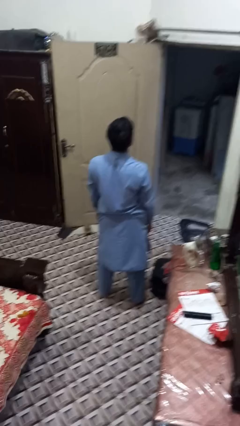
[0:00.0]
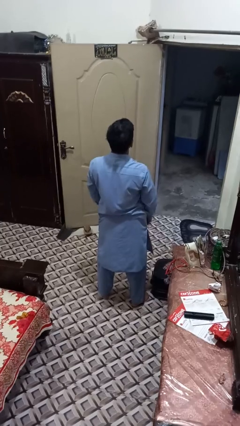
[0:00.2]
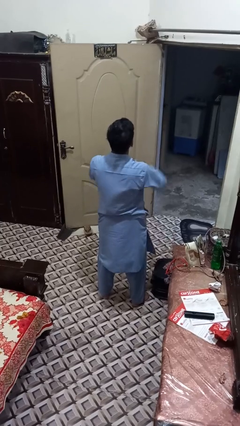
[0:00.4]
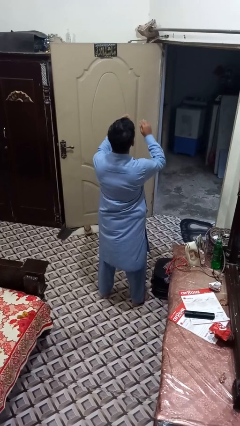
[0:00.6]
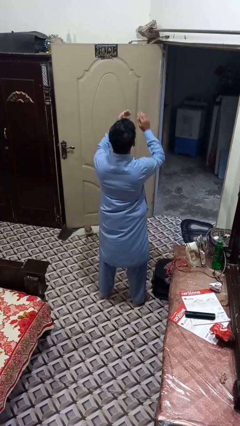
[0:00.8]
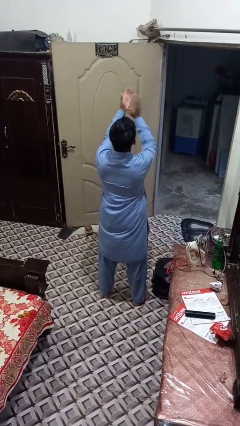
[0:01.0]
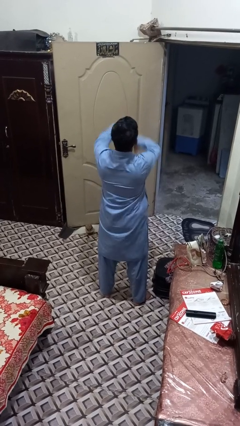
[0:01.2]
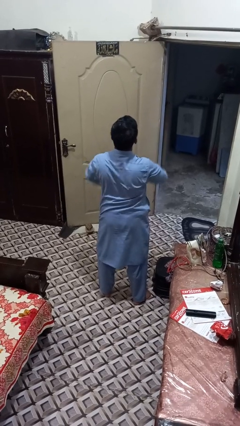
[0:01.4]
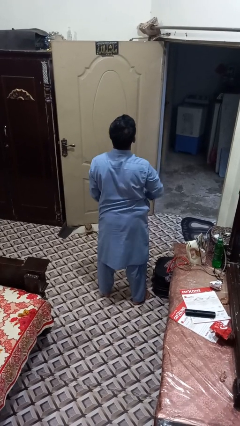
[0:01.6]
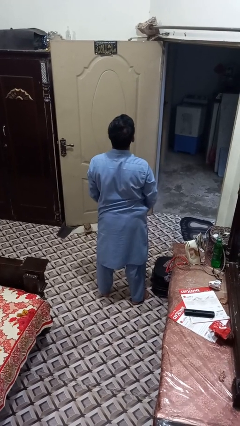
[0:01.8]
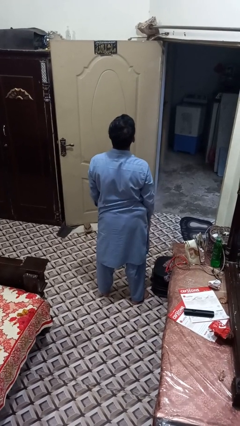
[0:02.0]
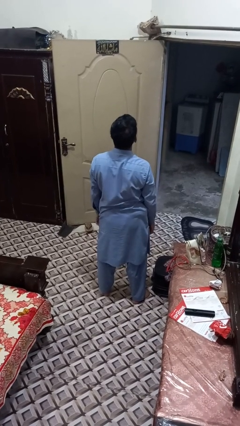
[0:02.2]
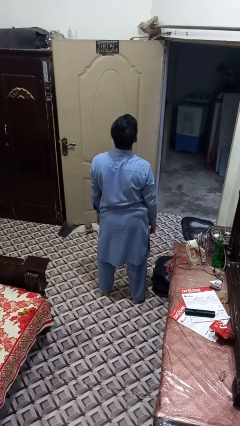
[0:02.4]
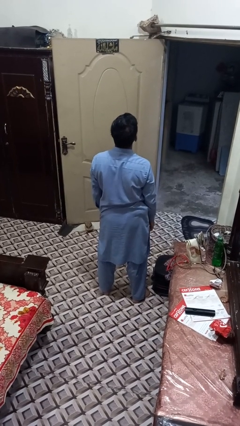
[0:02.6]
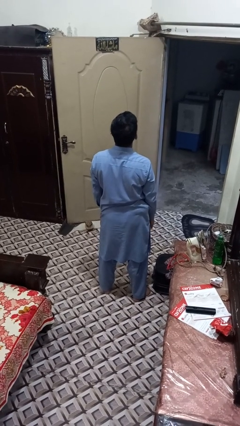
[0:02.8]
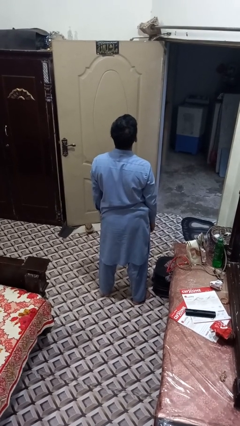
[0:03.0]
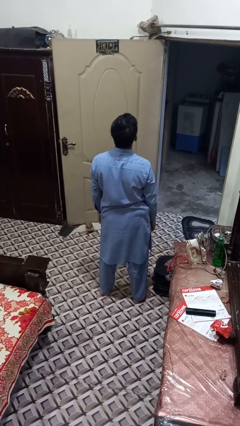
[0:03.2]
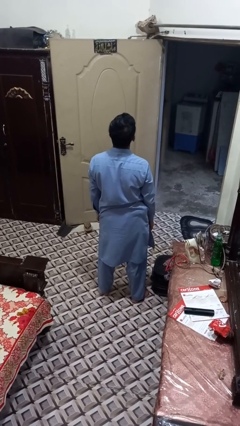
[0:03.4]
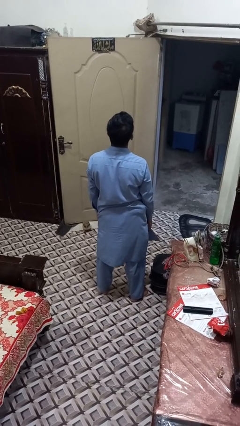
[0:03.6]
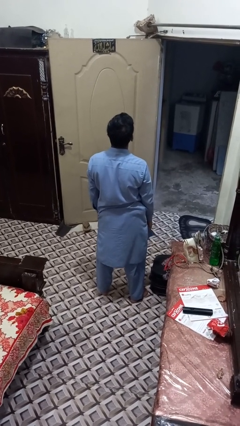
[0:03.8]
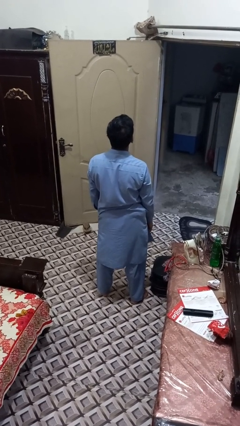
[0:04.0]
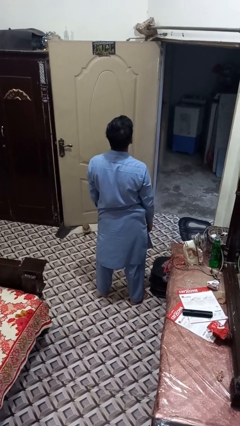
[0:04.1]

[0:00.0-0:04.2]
person swats bug

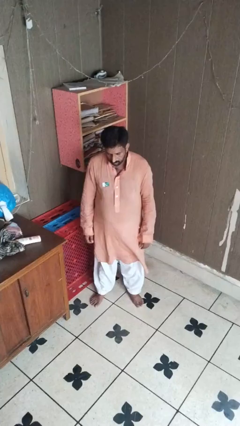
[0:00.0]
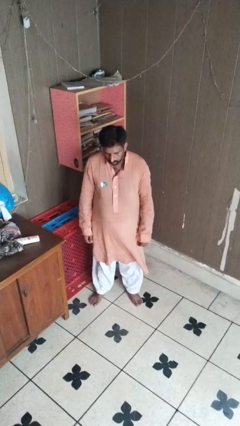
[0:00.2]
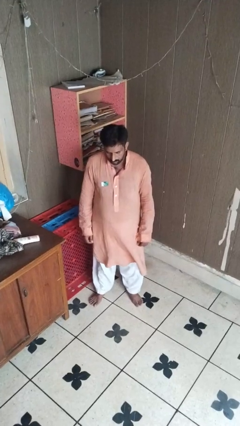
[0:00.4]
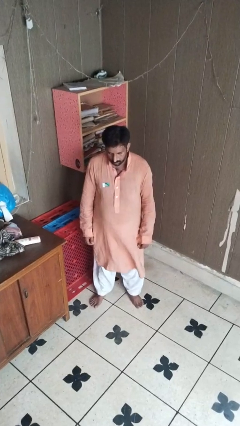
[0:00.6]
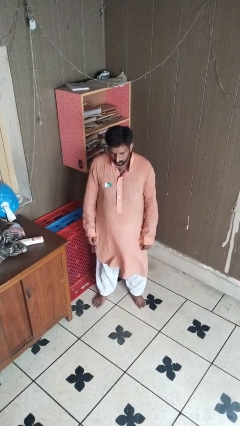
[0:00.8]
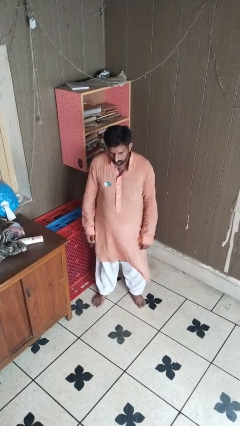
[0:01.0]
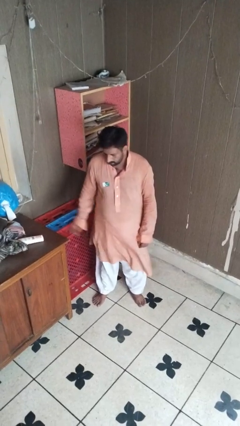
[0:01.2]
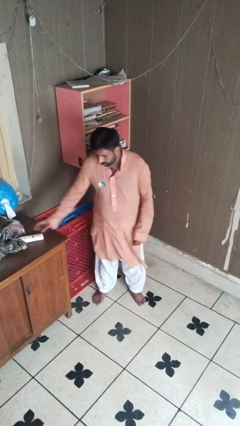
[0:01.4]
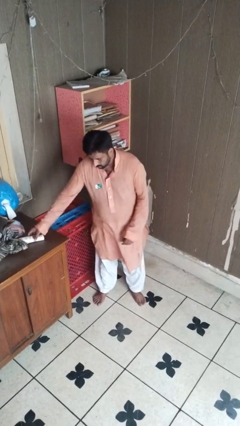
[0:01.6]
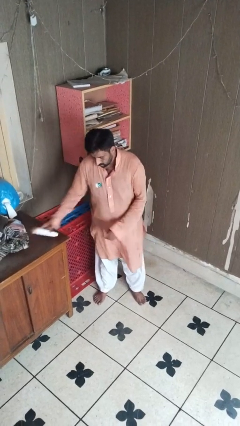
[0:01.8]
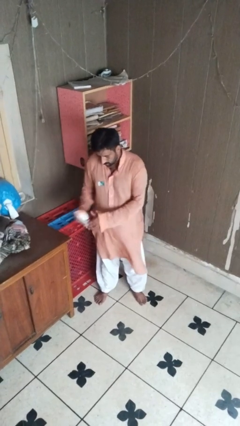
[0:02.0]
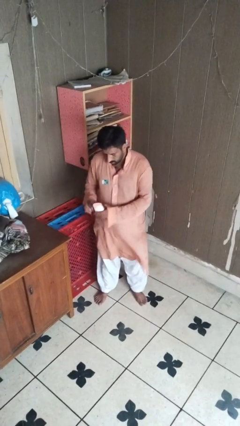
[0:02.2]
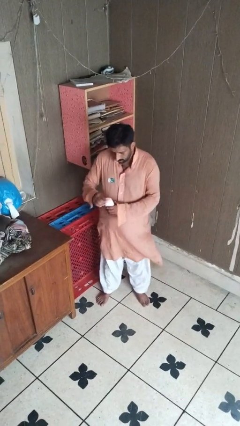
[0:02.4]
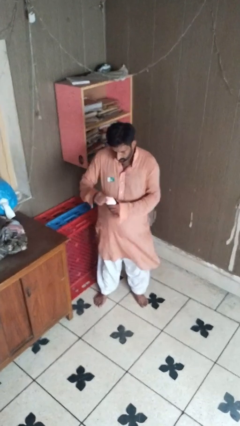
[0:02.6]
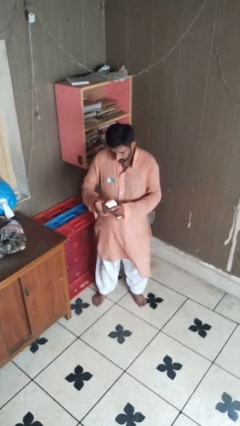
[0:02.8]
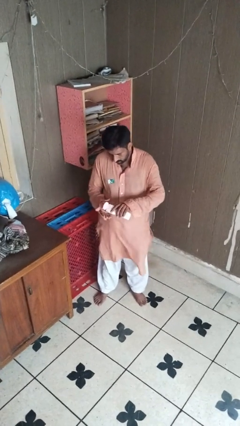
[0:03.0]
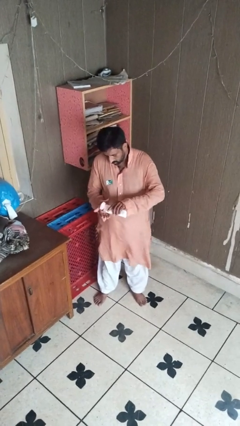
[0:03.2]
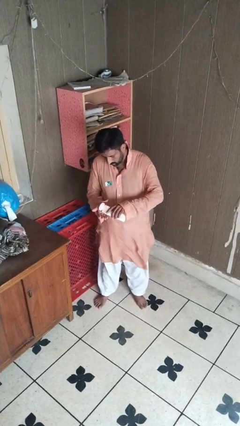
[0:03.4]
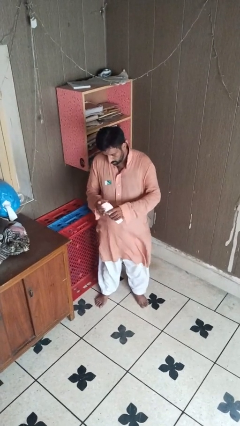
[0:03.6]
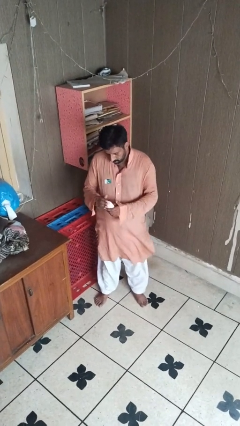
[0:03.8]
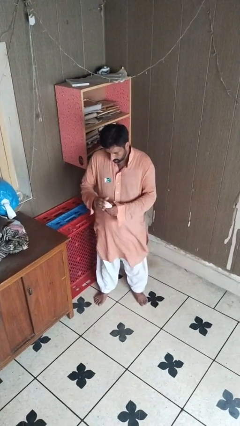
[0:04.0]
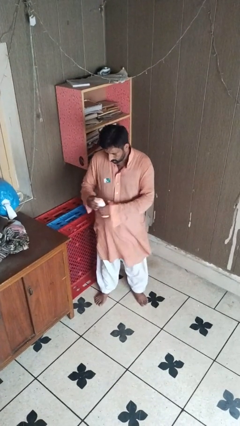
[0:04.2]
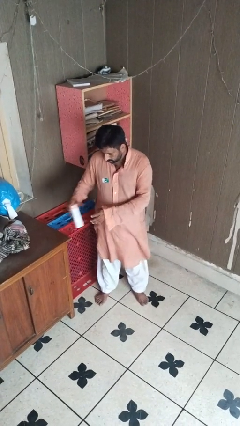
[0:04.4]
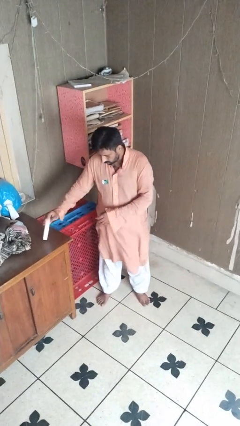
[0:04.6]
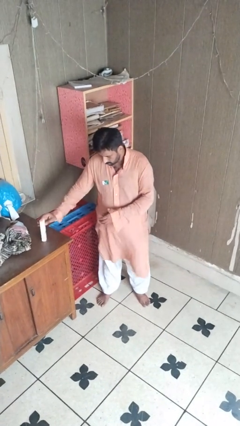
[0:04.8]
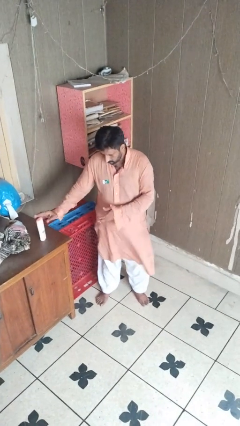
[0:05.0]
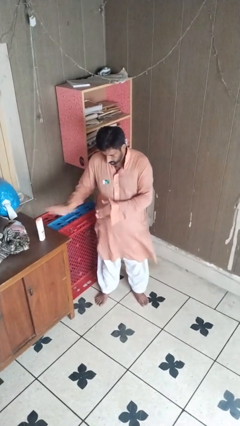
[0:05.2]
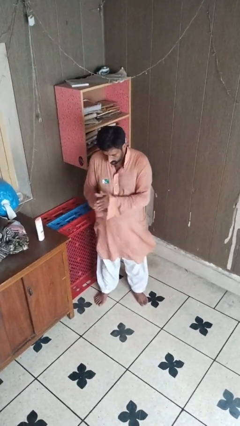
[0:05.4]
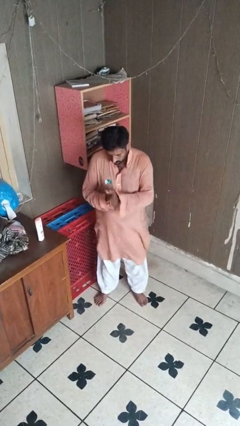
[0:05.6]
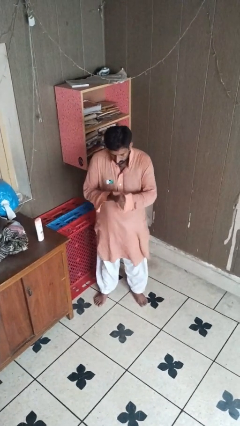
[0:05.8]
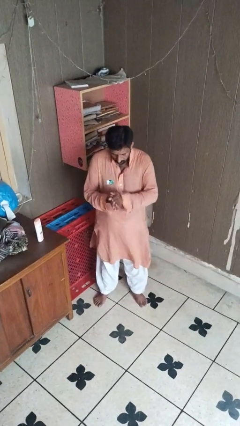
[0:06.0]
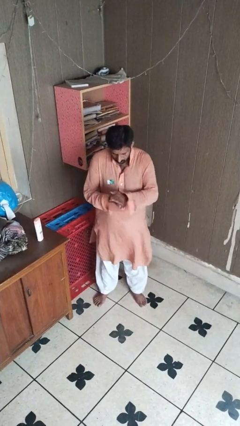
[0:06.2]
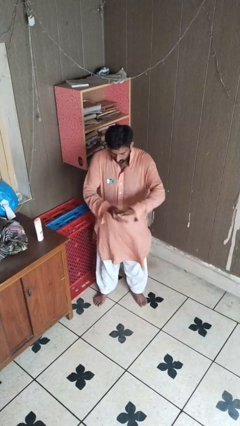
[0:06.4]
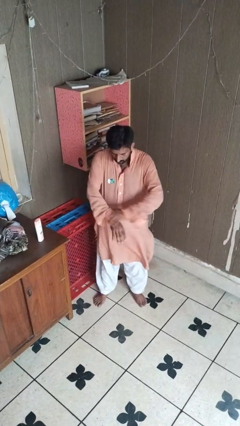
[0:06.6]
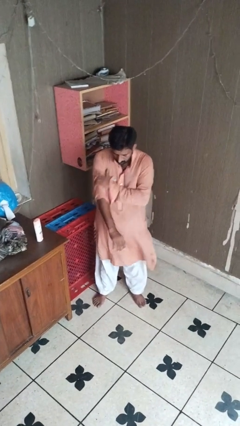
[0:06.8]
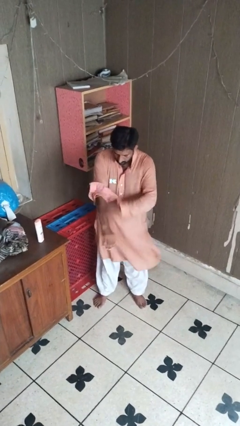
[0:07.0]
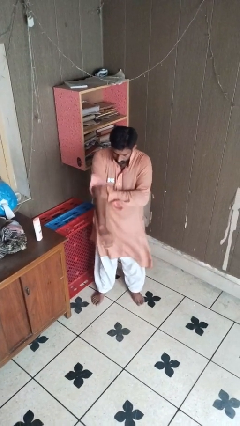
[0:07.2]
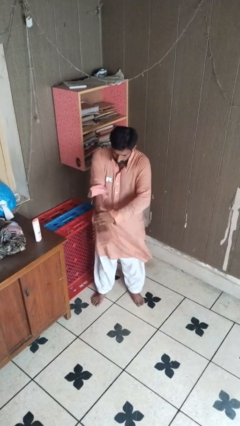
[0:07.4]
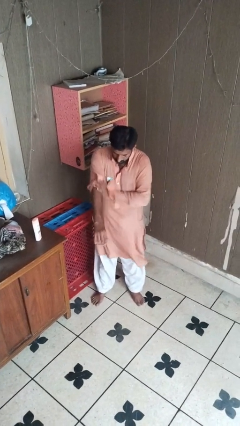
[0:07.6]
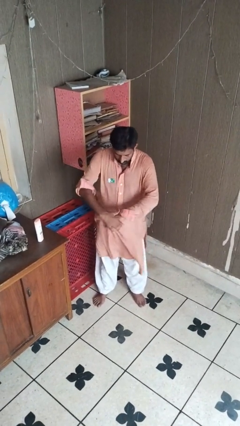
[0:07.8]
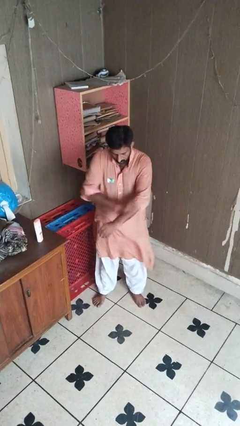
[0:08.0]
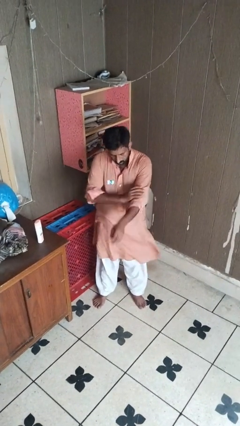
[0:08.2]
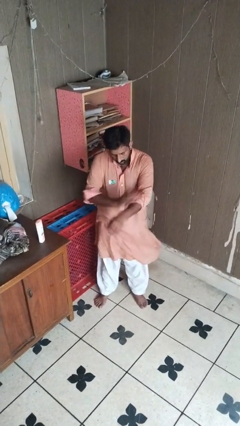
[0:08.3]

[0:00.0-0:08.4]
person applies facial moisturizer

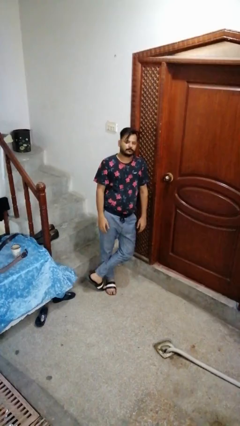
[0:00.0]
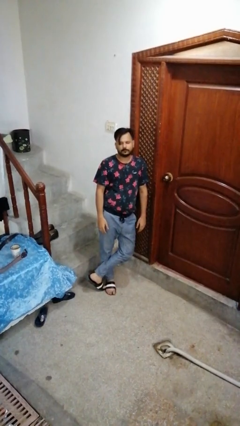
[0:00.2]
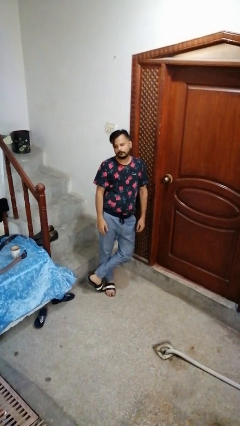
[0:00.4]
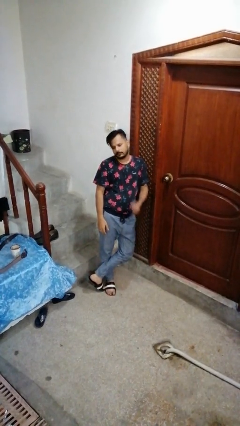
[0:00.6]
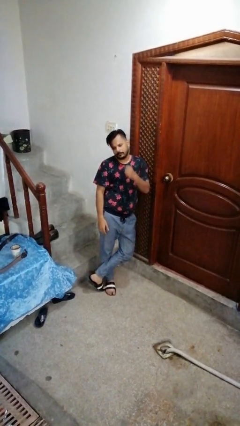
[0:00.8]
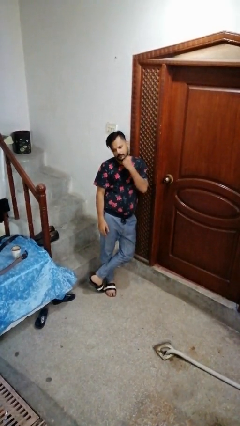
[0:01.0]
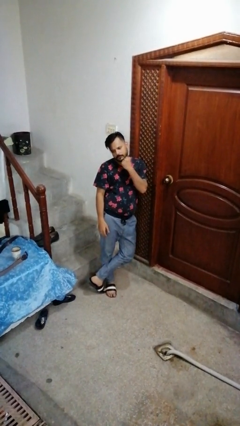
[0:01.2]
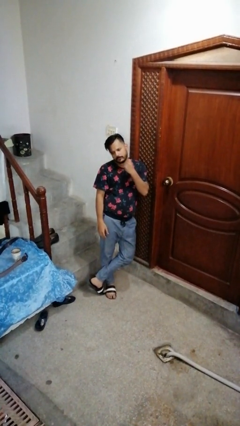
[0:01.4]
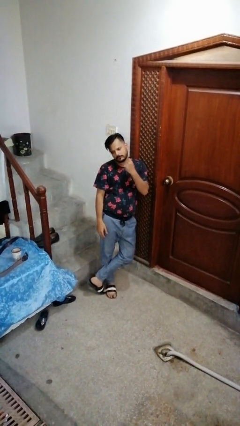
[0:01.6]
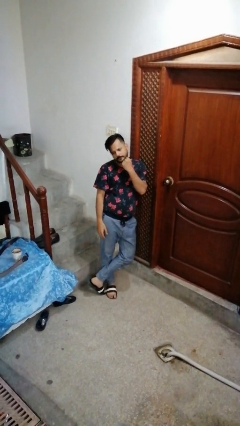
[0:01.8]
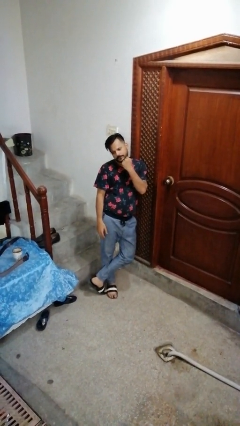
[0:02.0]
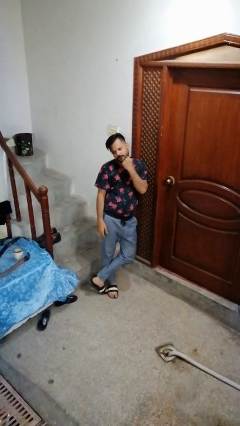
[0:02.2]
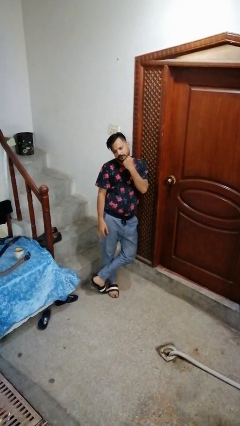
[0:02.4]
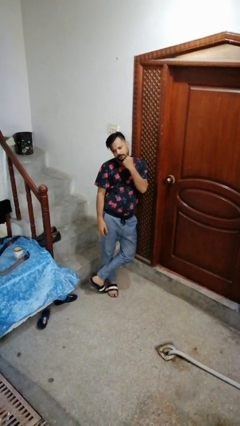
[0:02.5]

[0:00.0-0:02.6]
person strokes chin

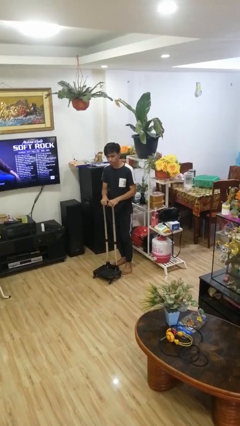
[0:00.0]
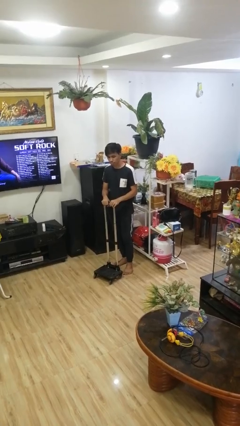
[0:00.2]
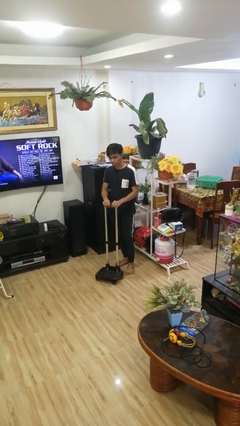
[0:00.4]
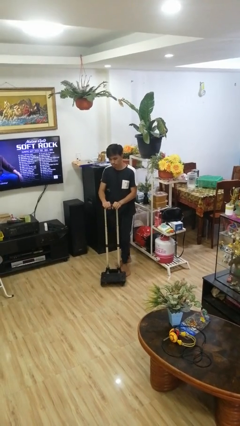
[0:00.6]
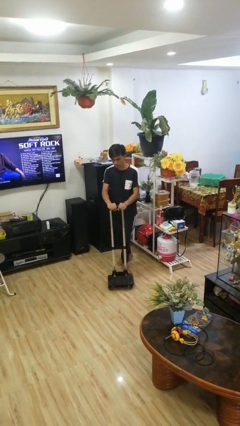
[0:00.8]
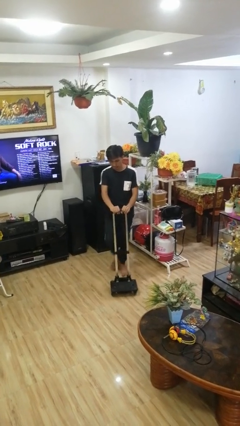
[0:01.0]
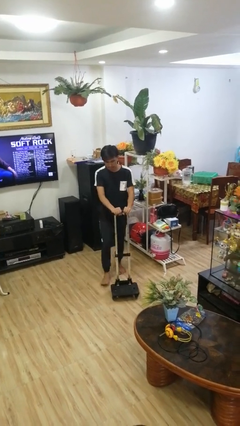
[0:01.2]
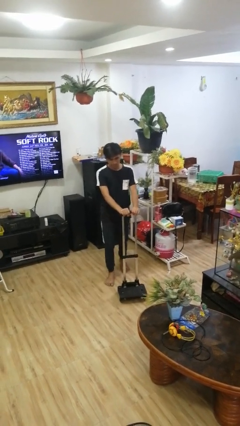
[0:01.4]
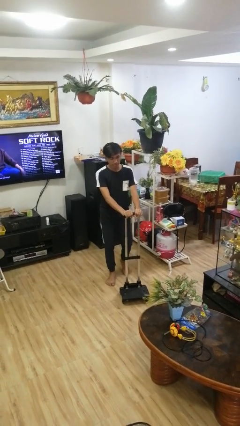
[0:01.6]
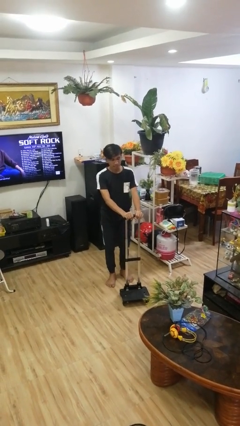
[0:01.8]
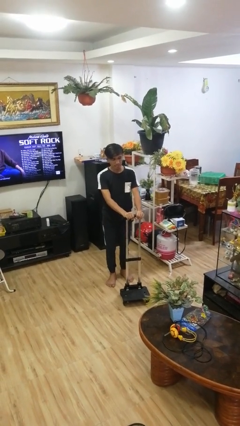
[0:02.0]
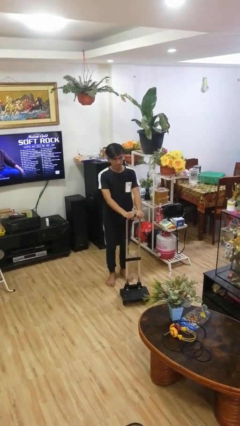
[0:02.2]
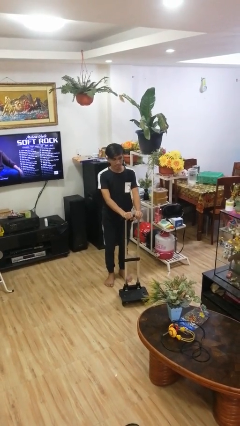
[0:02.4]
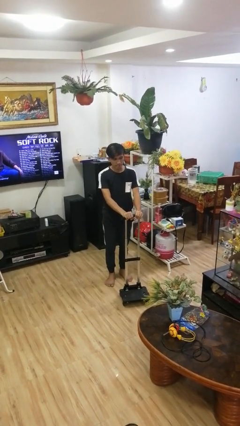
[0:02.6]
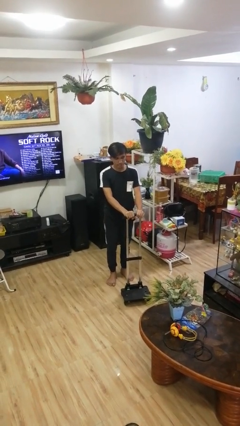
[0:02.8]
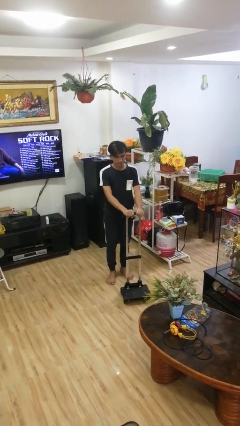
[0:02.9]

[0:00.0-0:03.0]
person pushes wheeled cart
